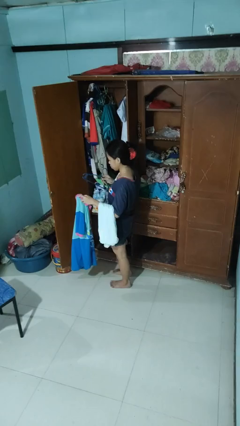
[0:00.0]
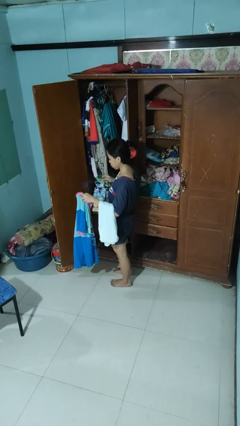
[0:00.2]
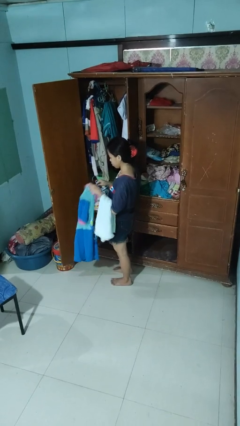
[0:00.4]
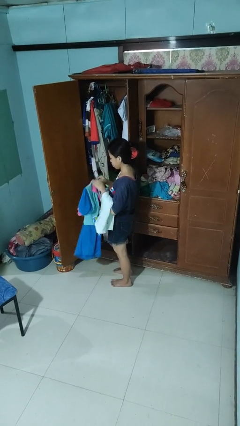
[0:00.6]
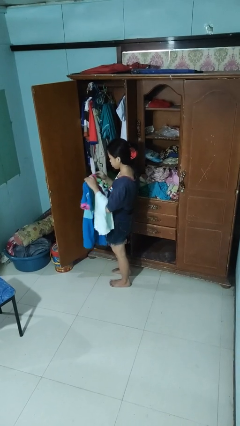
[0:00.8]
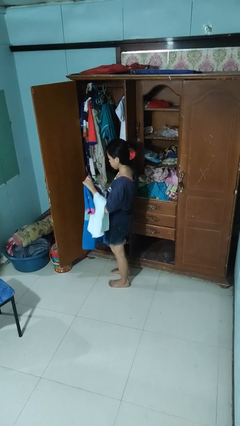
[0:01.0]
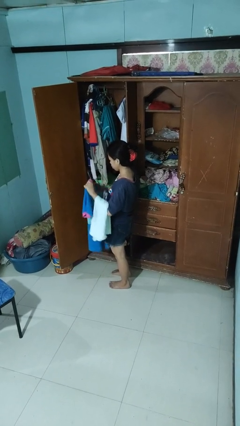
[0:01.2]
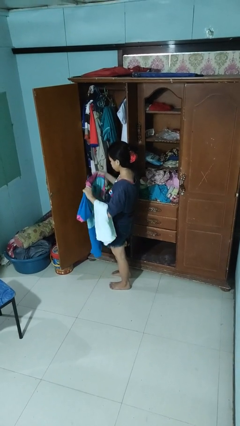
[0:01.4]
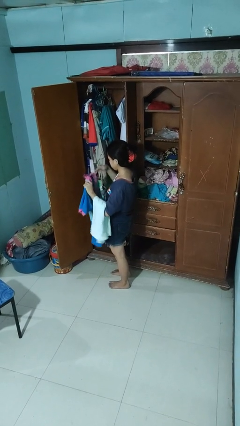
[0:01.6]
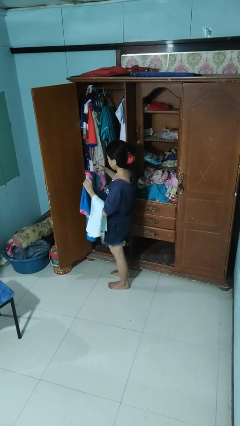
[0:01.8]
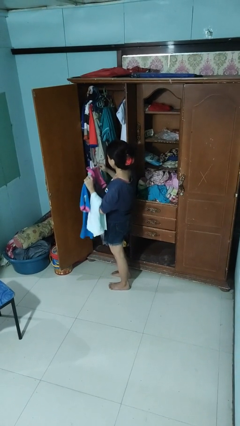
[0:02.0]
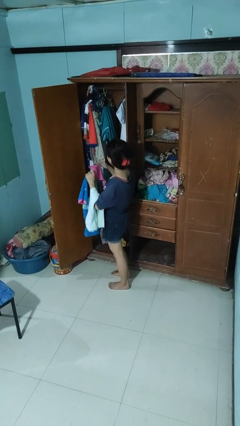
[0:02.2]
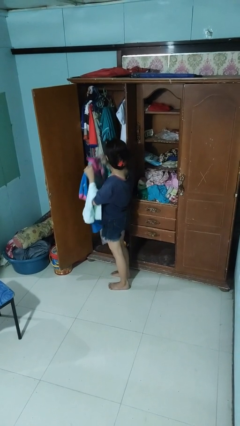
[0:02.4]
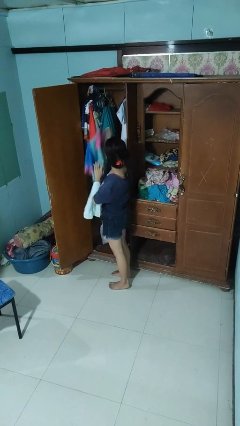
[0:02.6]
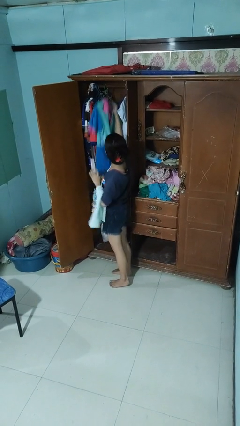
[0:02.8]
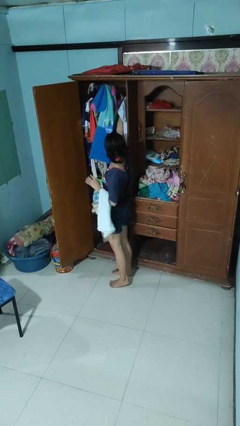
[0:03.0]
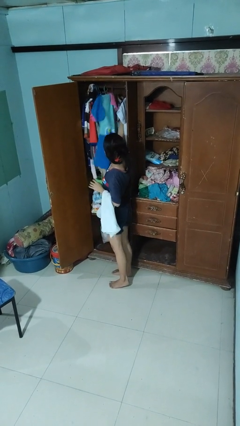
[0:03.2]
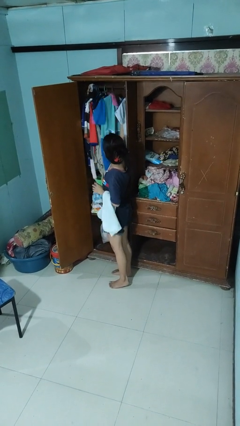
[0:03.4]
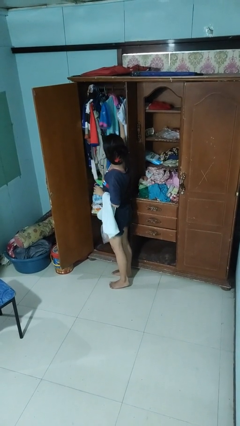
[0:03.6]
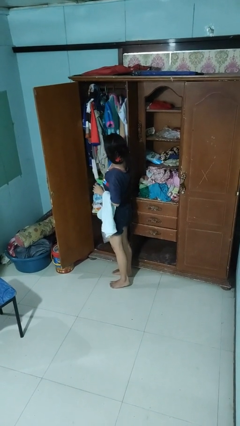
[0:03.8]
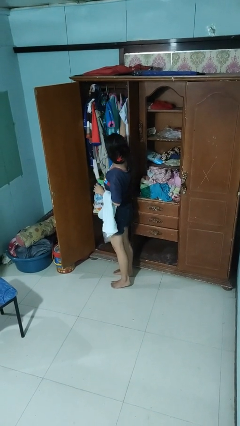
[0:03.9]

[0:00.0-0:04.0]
person puts clothes into closet

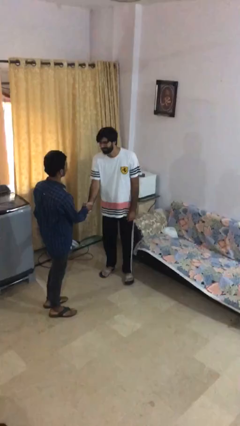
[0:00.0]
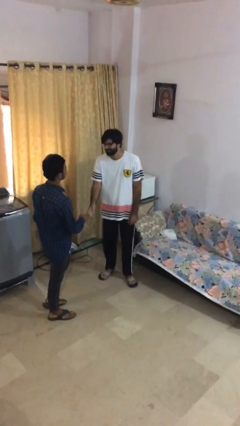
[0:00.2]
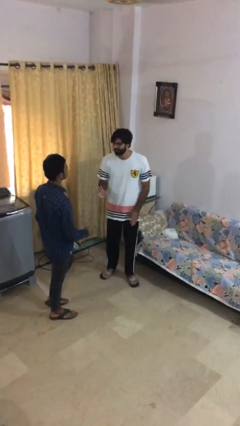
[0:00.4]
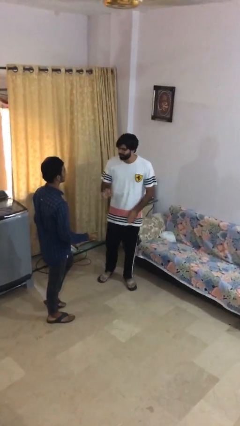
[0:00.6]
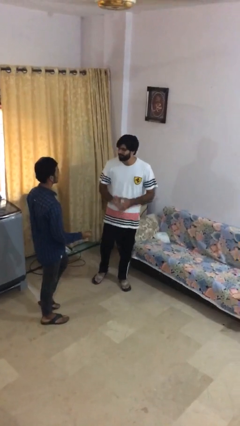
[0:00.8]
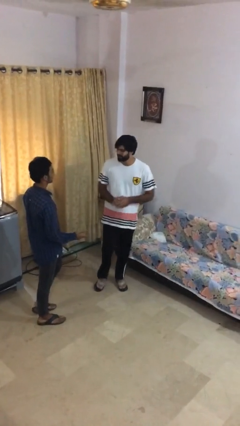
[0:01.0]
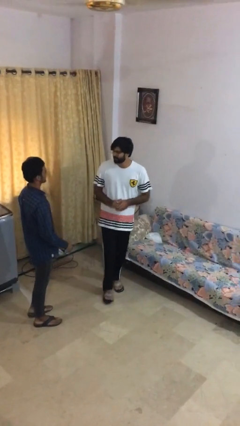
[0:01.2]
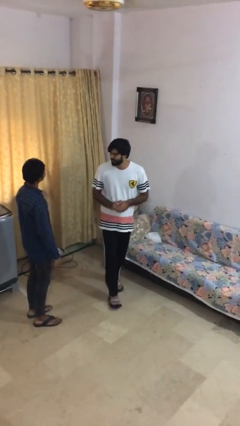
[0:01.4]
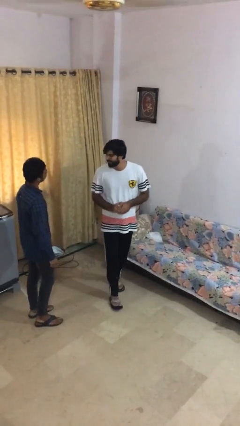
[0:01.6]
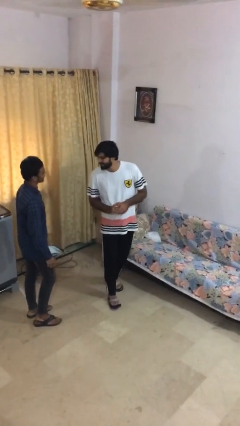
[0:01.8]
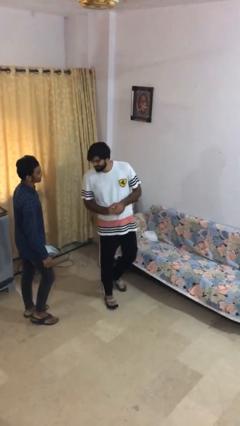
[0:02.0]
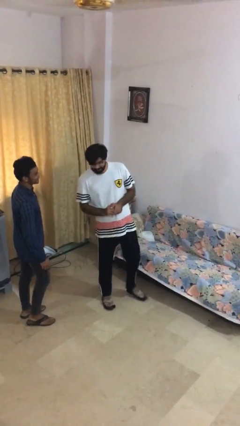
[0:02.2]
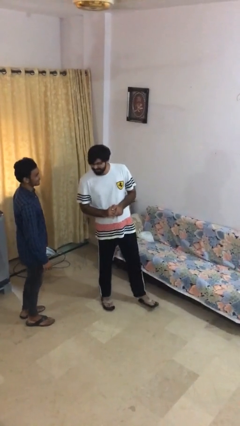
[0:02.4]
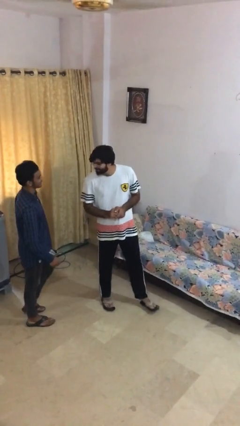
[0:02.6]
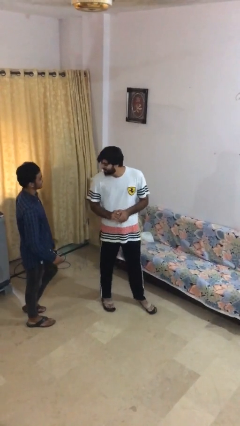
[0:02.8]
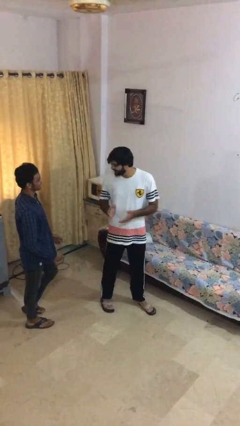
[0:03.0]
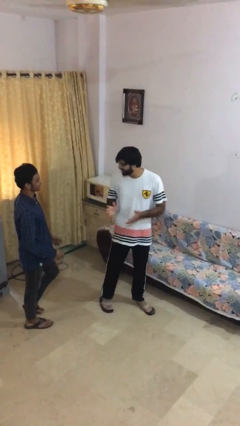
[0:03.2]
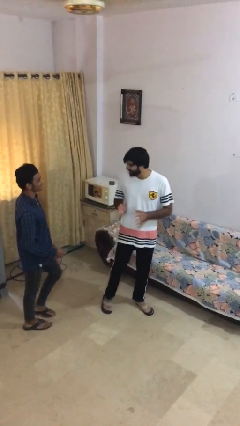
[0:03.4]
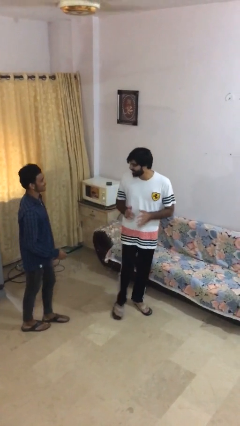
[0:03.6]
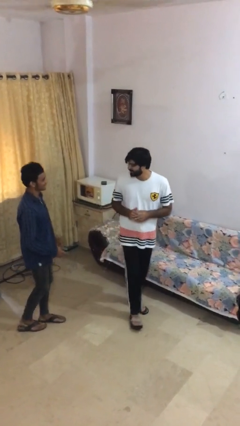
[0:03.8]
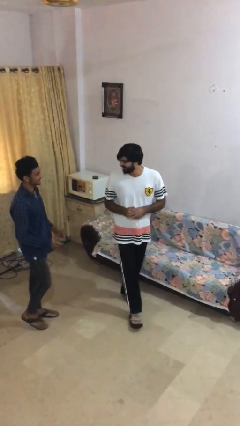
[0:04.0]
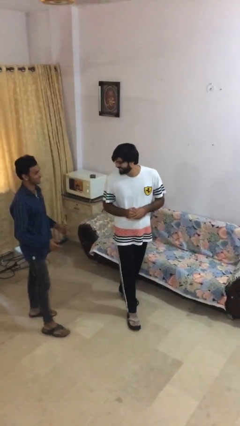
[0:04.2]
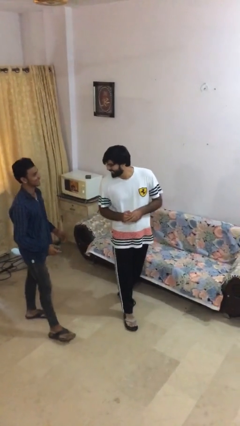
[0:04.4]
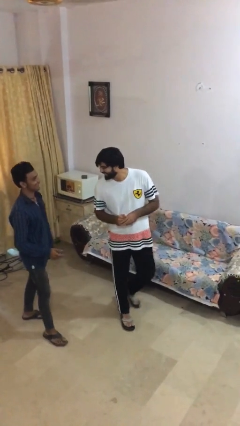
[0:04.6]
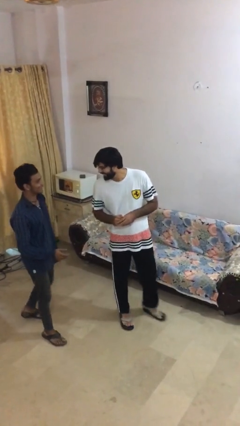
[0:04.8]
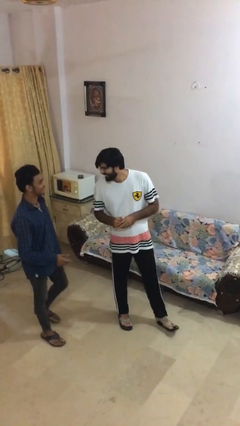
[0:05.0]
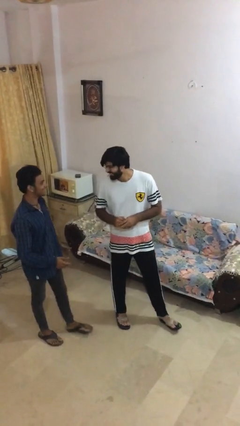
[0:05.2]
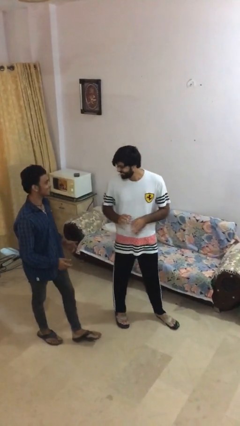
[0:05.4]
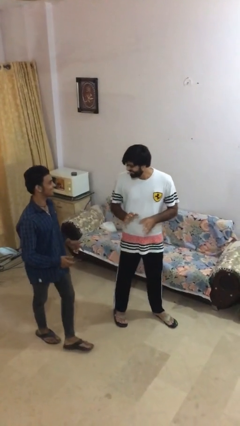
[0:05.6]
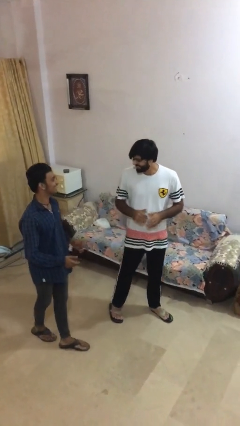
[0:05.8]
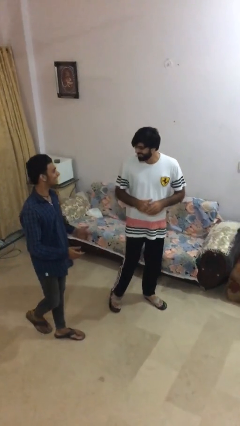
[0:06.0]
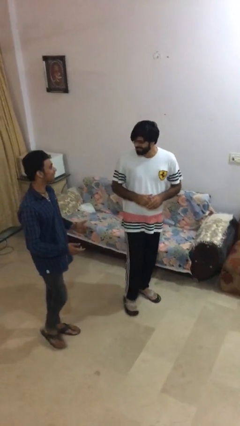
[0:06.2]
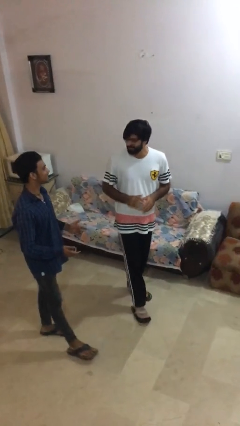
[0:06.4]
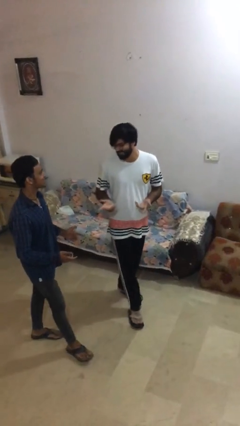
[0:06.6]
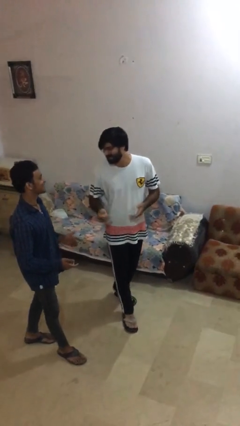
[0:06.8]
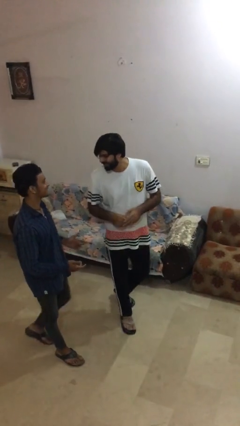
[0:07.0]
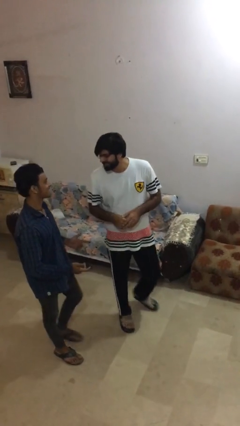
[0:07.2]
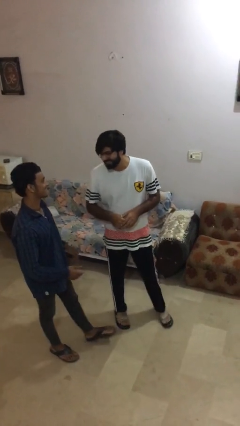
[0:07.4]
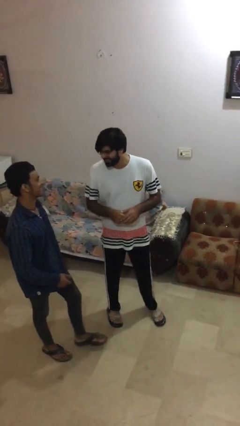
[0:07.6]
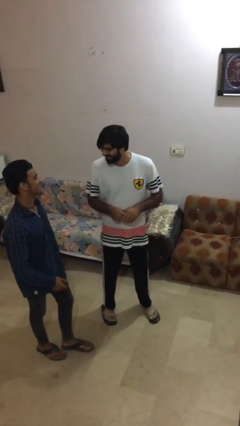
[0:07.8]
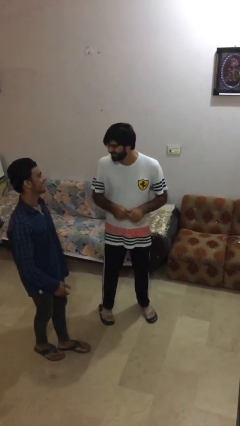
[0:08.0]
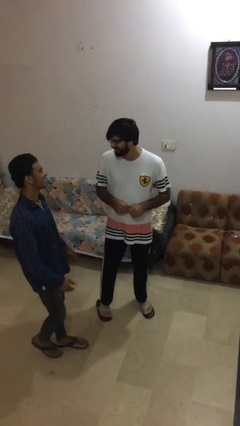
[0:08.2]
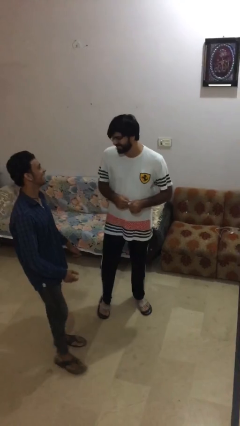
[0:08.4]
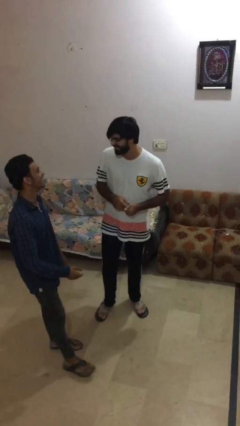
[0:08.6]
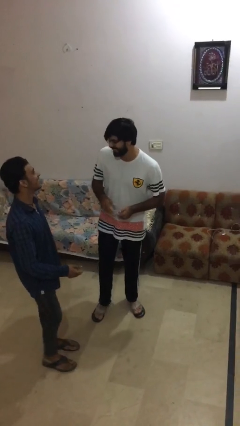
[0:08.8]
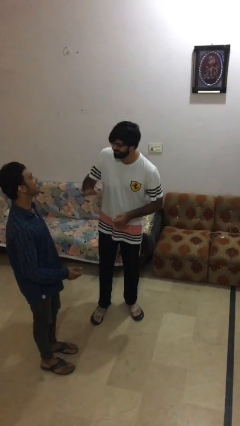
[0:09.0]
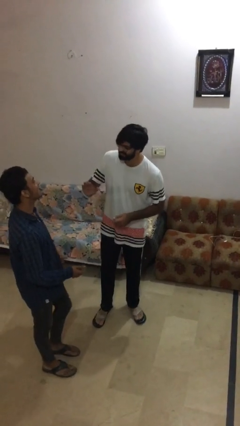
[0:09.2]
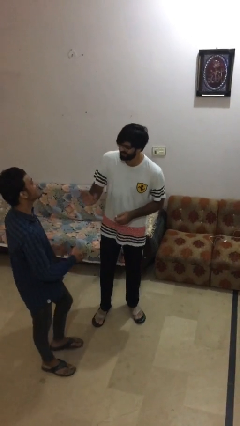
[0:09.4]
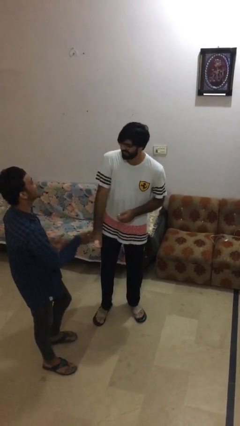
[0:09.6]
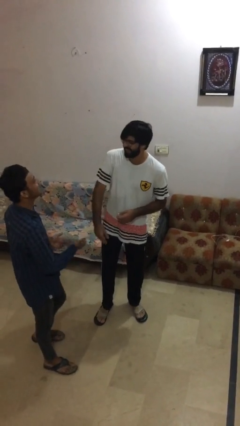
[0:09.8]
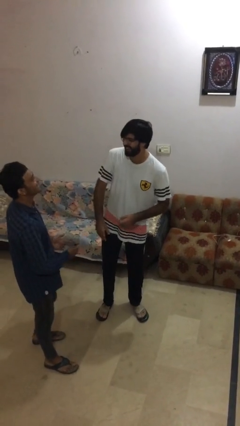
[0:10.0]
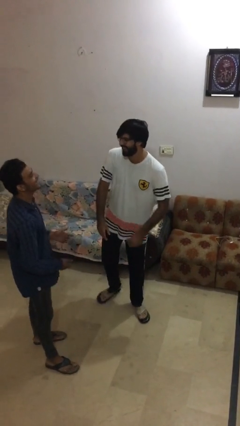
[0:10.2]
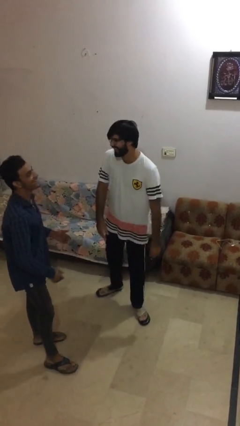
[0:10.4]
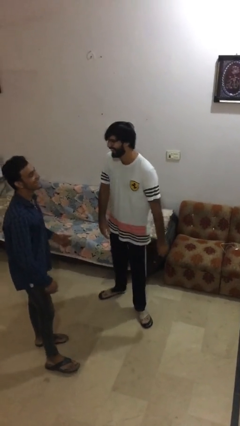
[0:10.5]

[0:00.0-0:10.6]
person talks to person

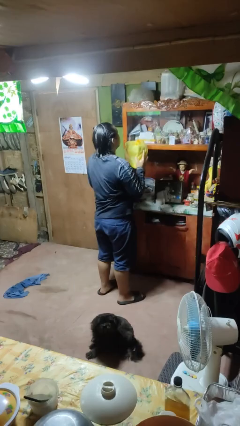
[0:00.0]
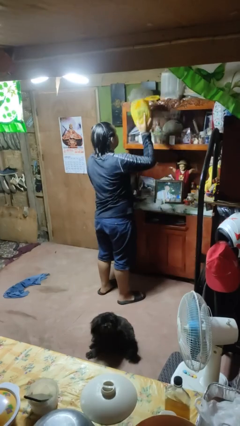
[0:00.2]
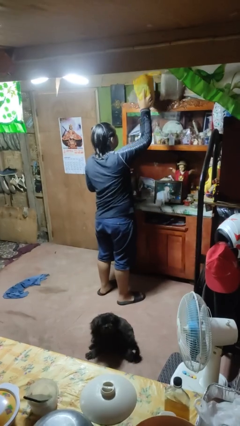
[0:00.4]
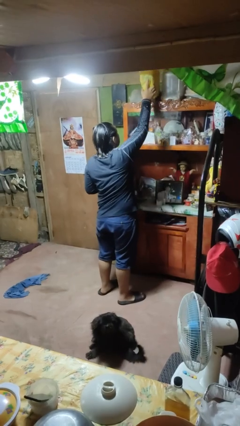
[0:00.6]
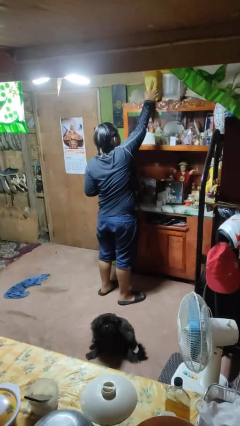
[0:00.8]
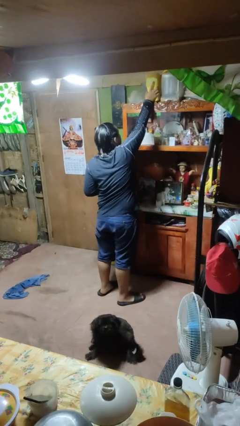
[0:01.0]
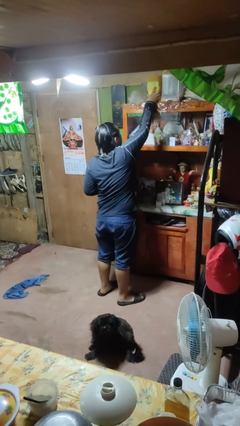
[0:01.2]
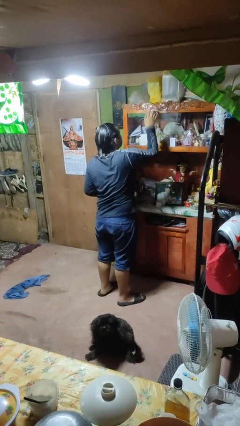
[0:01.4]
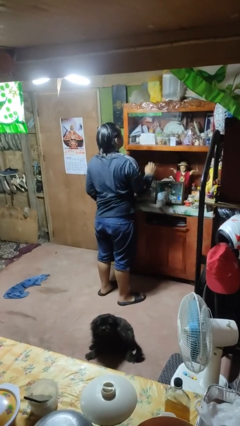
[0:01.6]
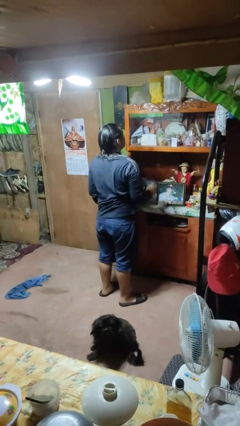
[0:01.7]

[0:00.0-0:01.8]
person puts down object on shelf

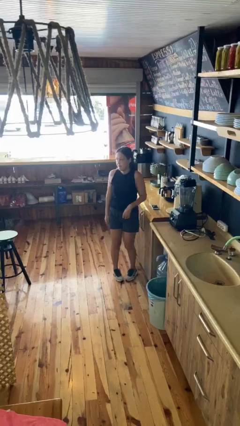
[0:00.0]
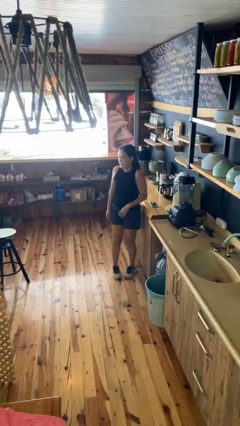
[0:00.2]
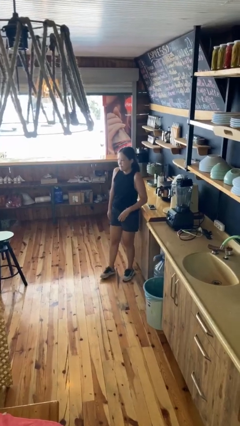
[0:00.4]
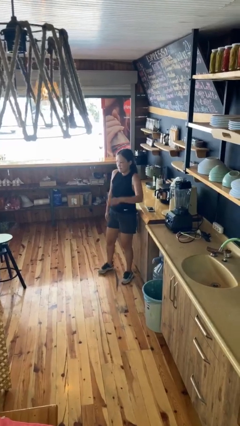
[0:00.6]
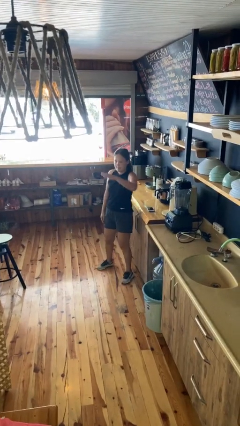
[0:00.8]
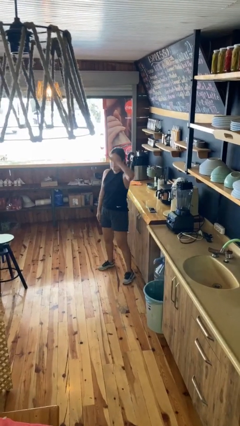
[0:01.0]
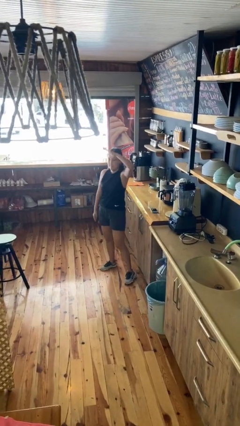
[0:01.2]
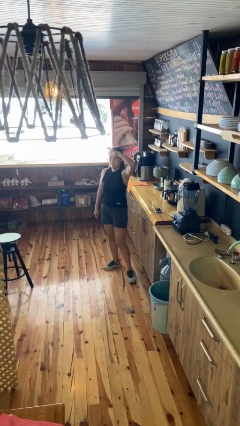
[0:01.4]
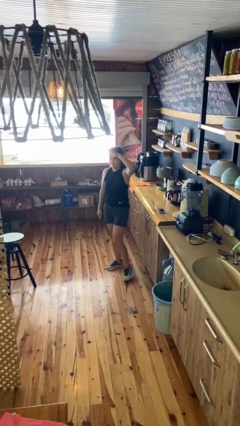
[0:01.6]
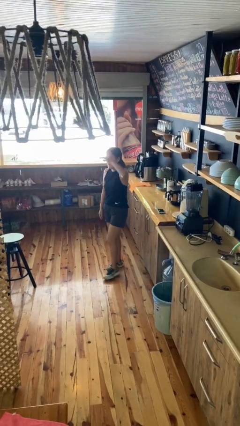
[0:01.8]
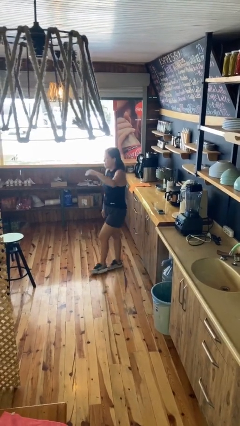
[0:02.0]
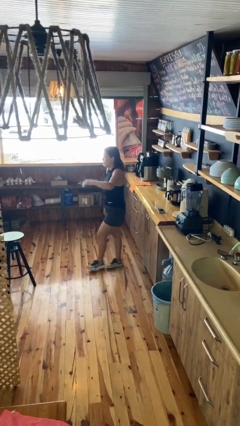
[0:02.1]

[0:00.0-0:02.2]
person salutes
